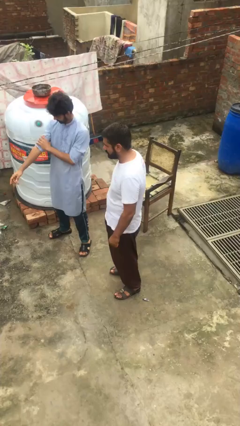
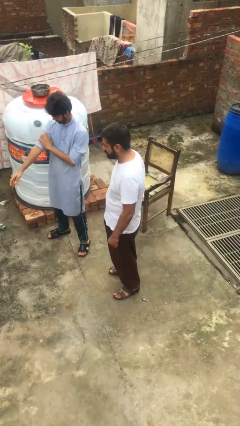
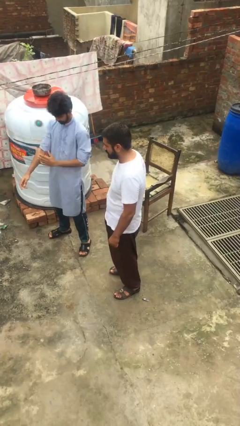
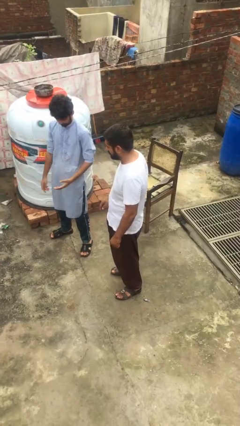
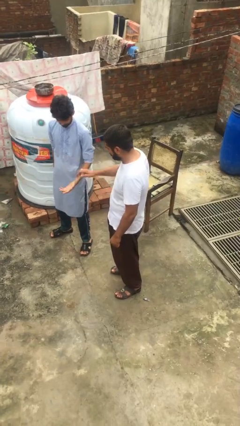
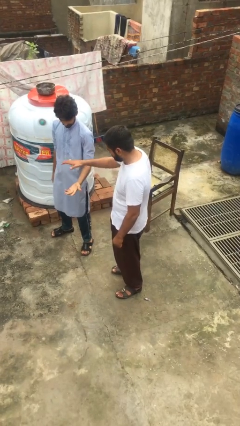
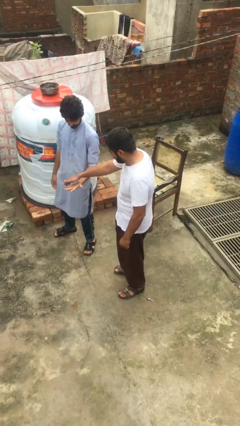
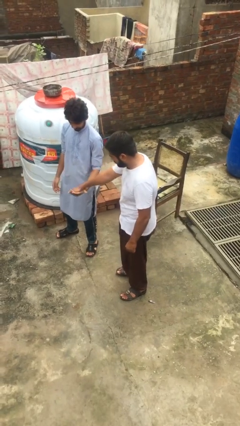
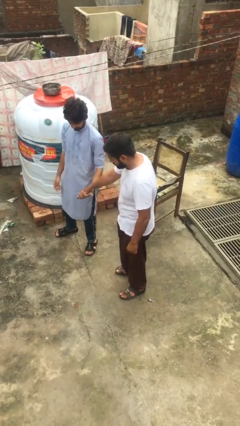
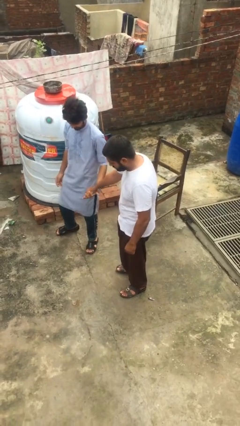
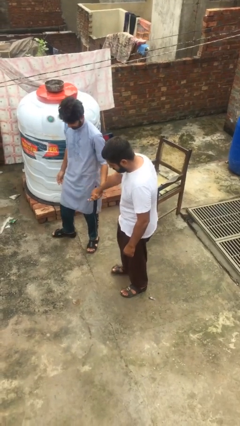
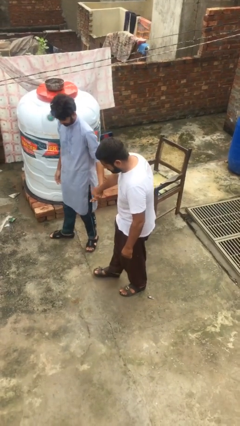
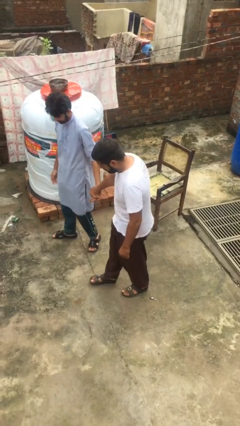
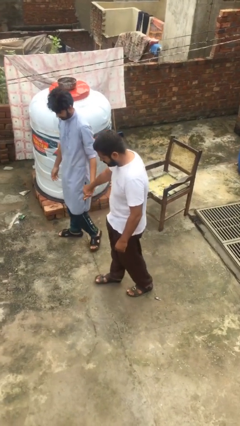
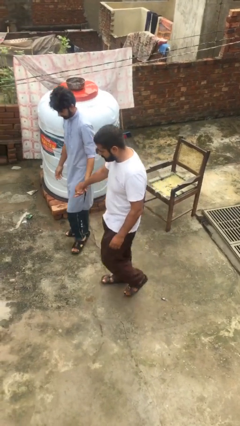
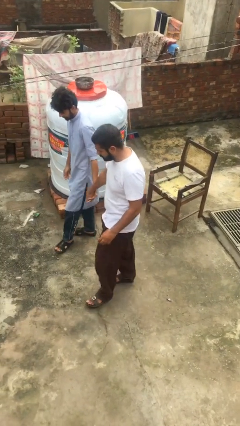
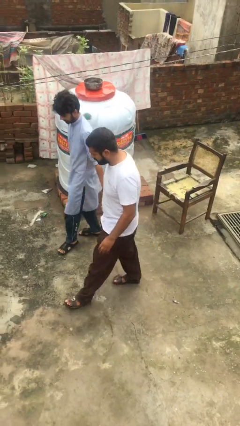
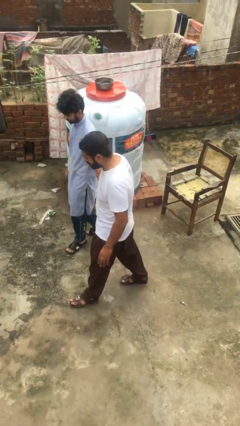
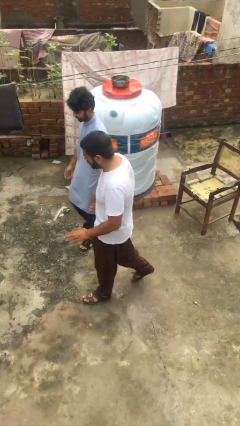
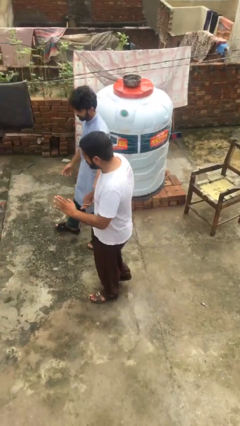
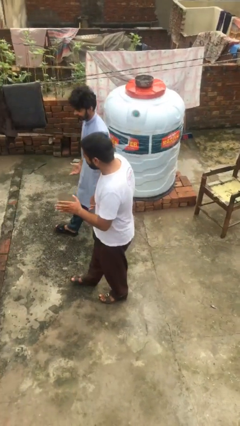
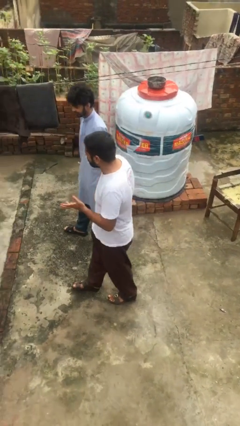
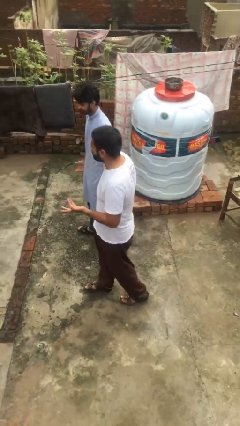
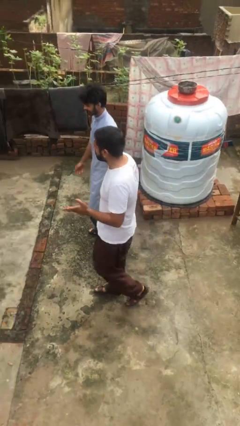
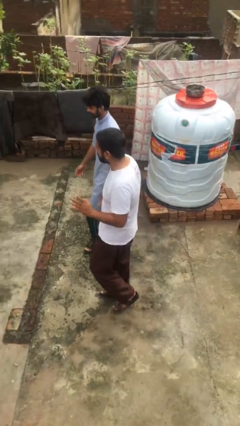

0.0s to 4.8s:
person holds hand

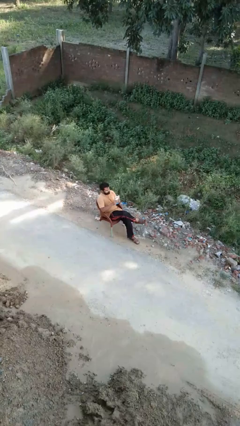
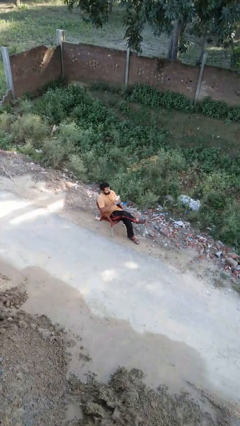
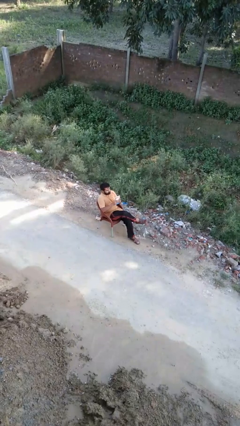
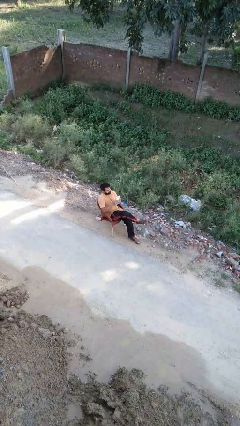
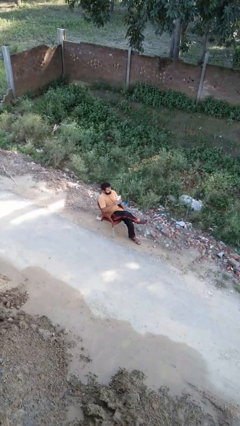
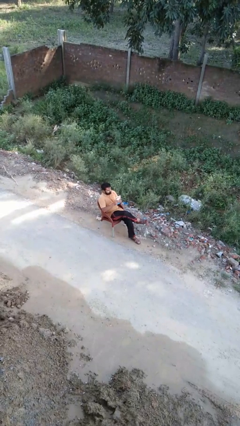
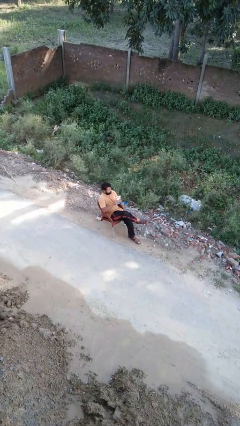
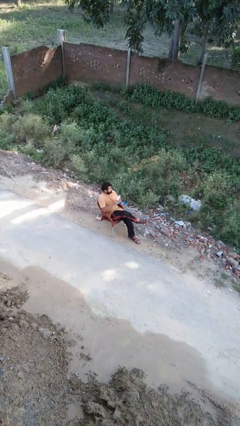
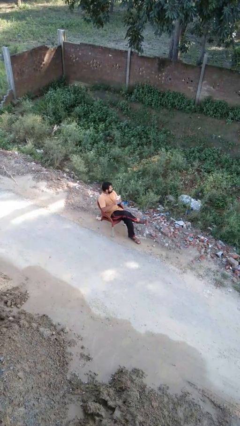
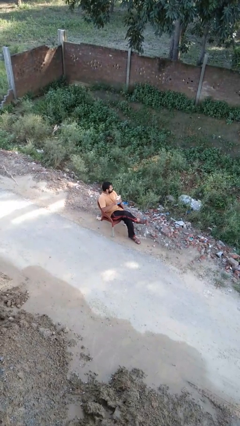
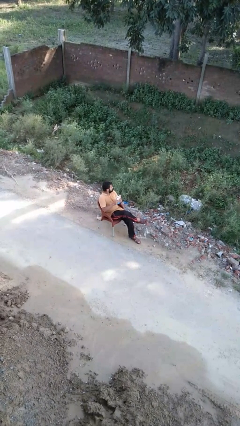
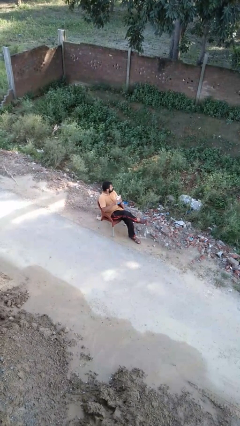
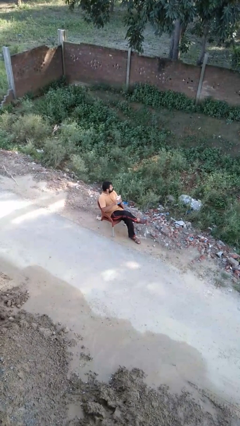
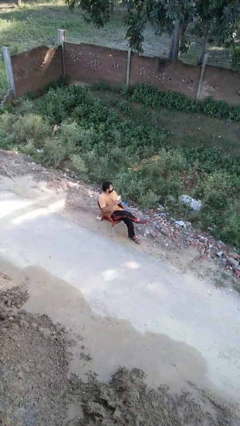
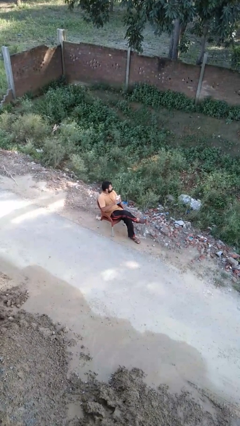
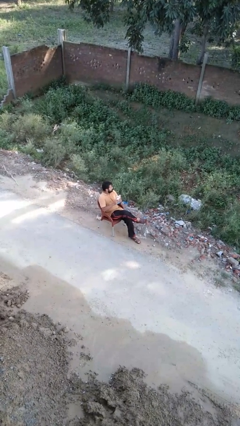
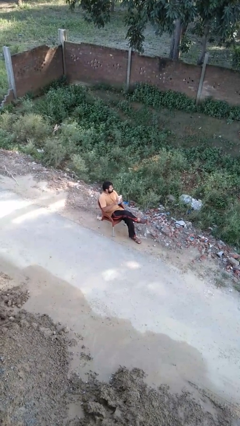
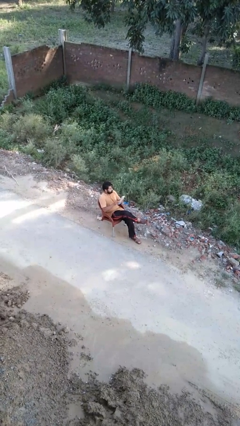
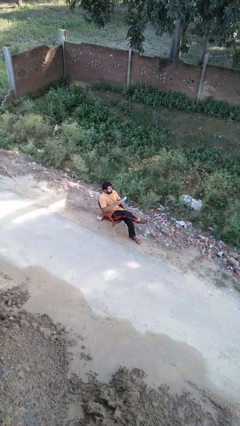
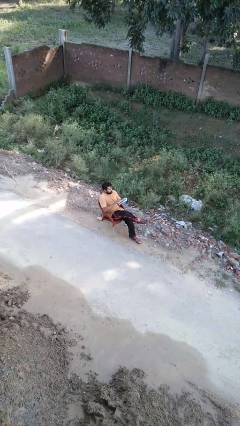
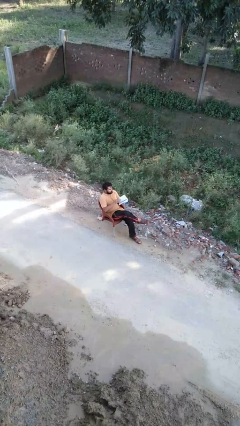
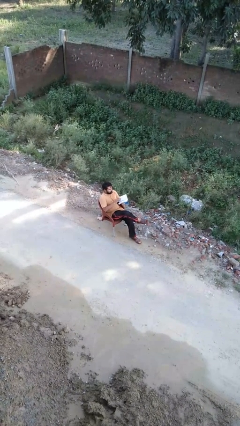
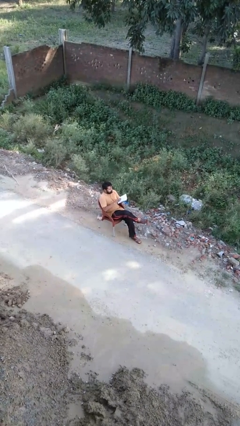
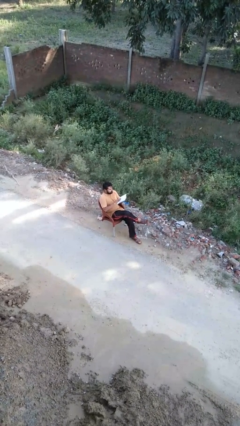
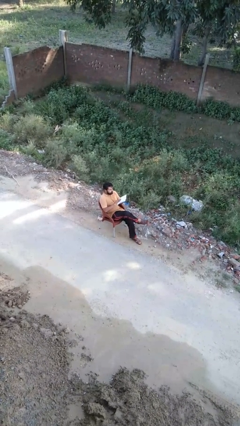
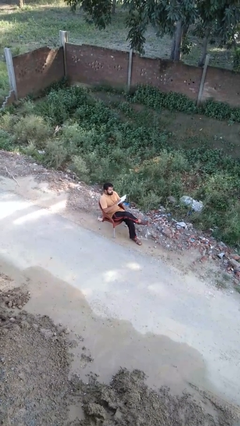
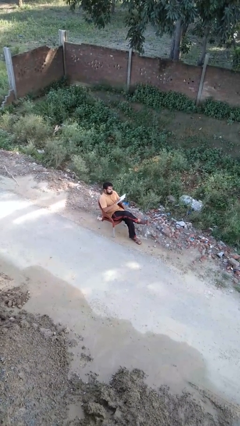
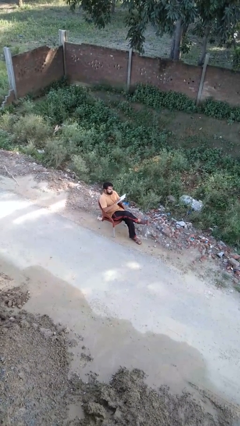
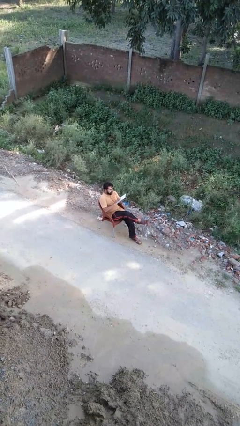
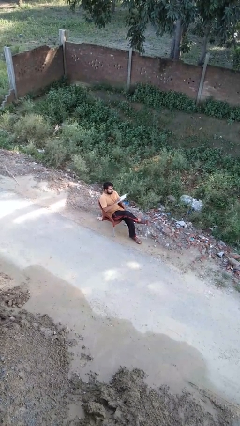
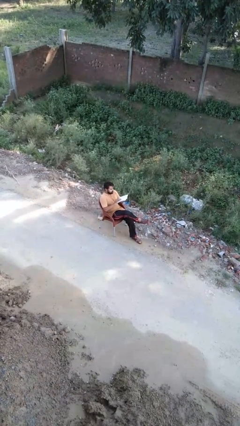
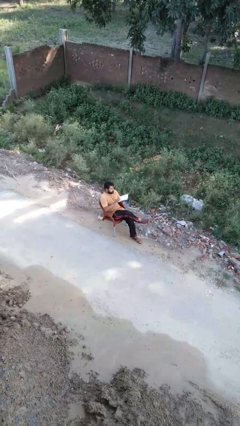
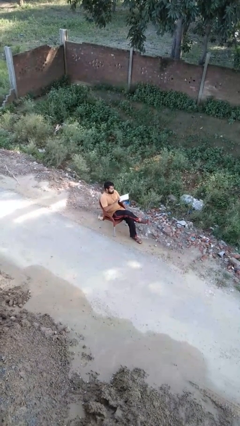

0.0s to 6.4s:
person reads book

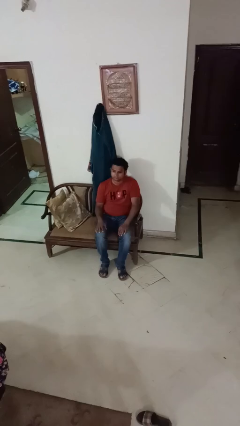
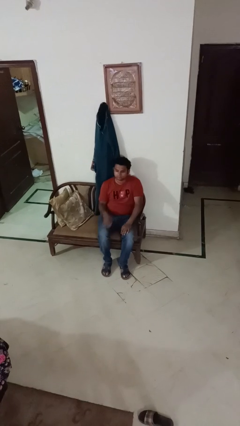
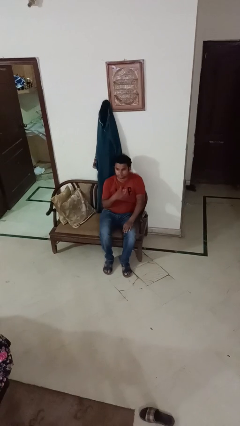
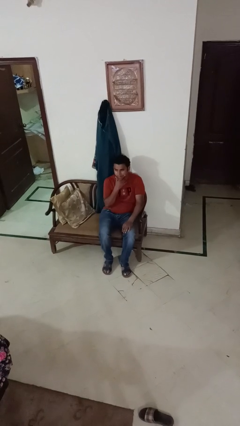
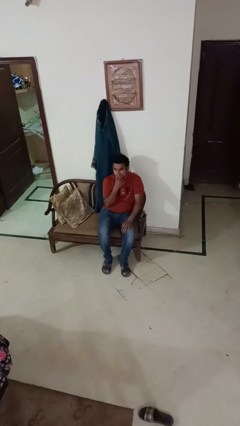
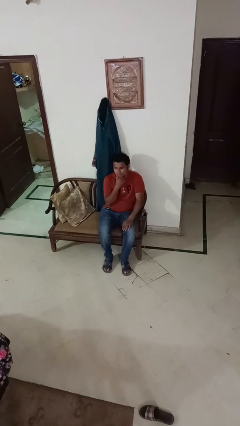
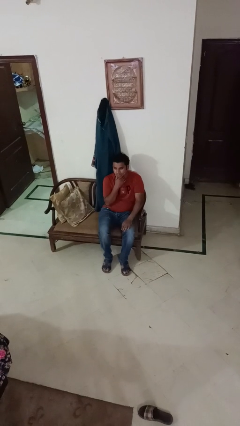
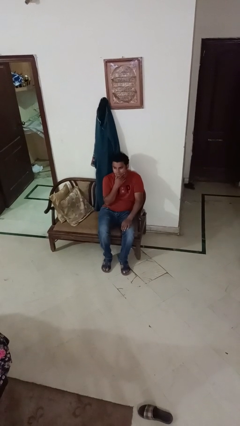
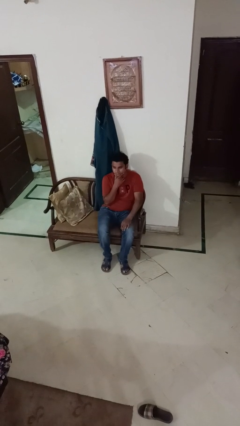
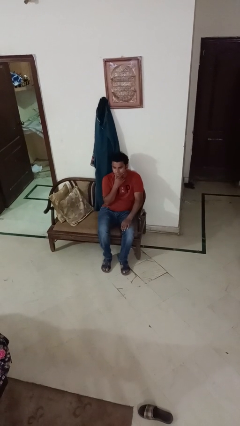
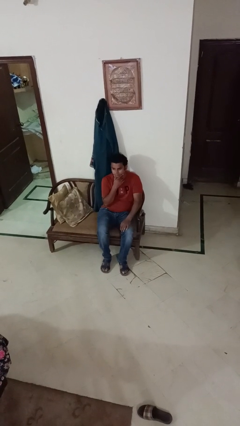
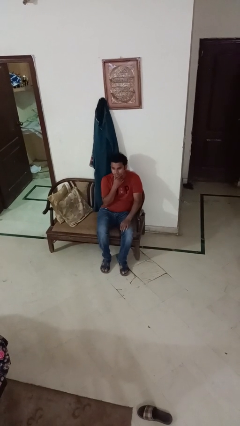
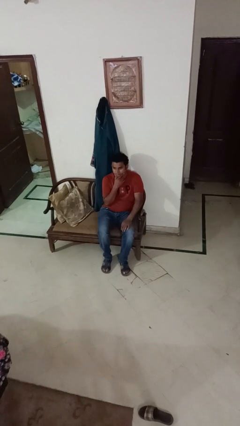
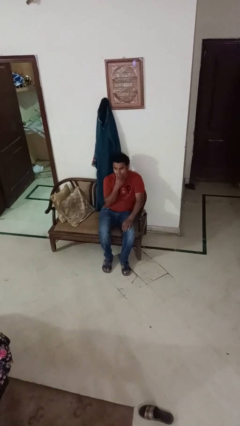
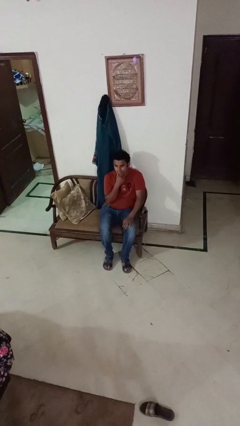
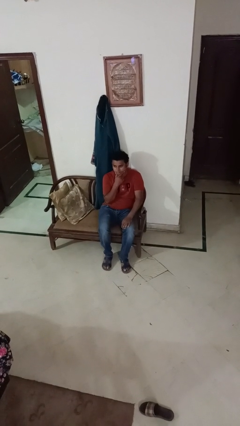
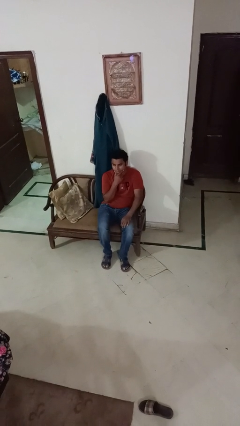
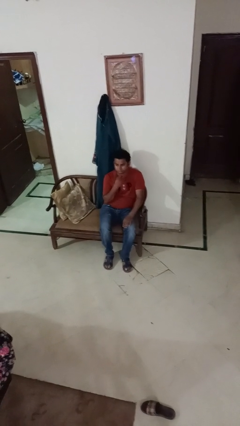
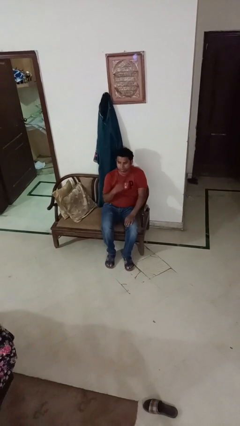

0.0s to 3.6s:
person strokes chin

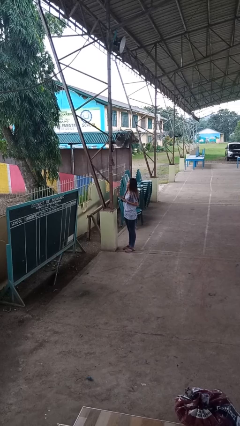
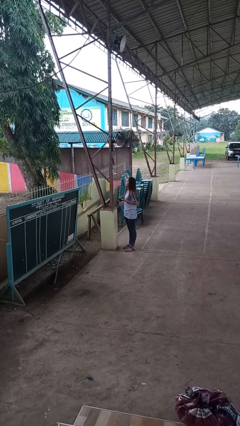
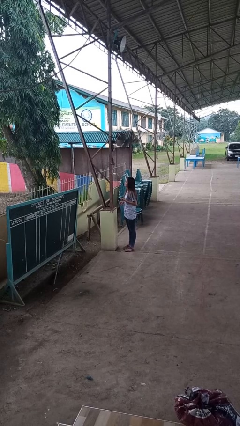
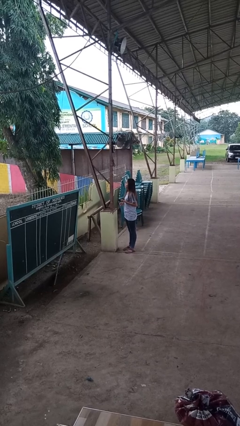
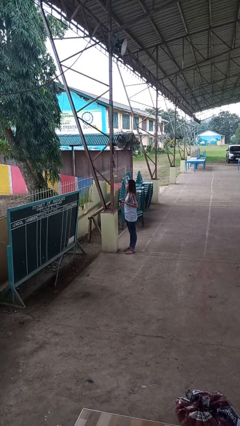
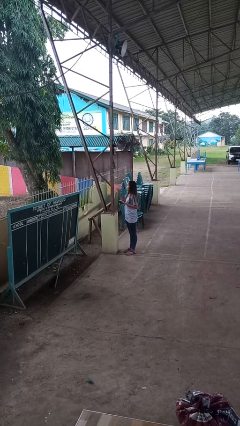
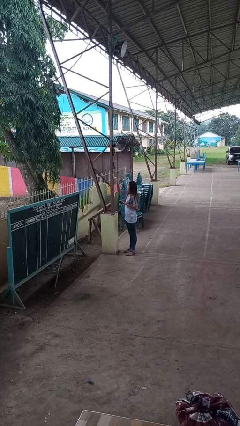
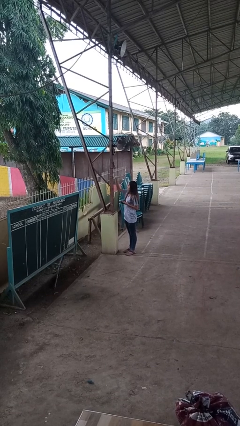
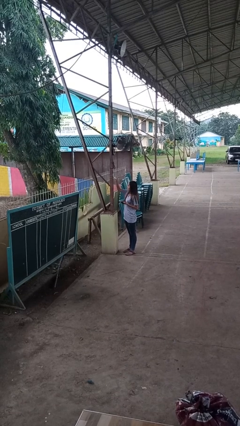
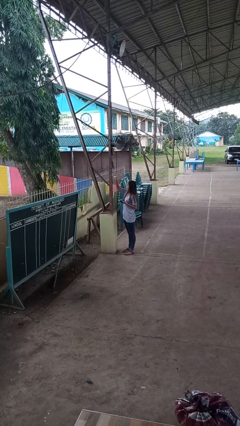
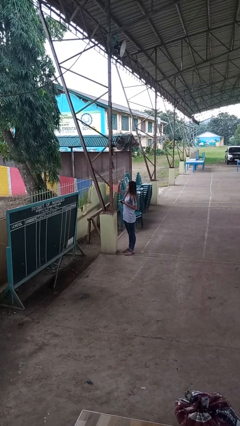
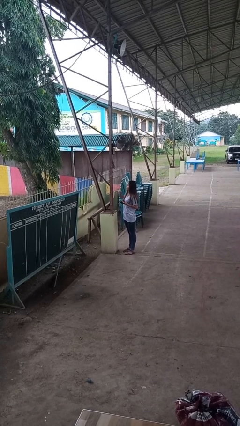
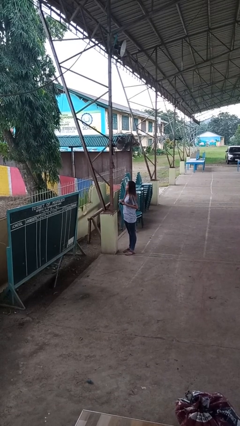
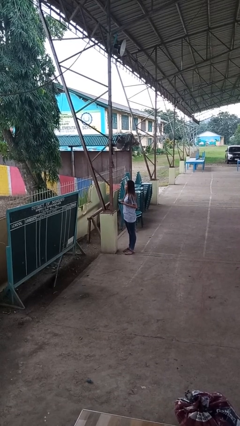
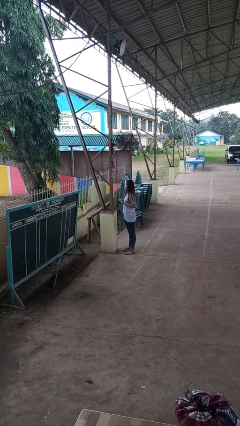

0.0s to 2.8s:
person unplugs from electrical socket
